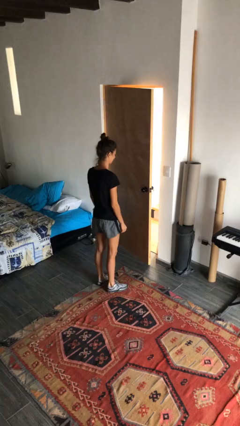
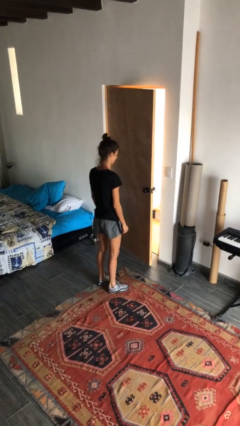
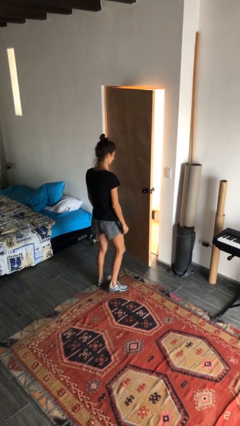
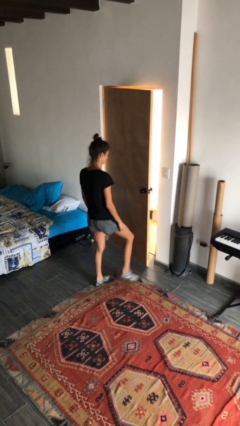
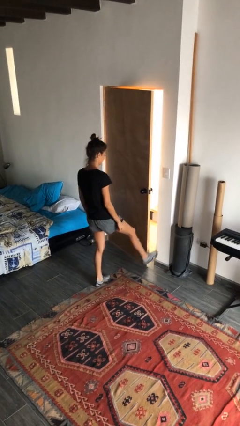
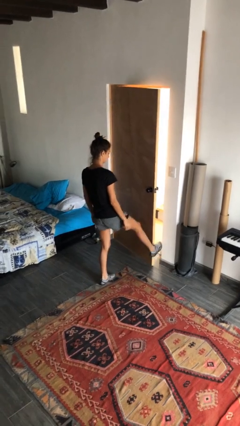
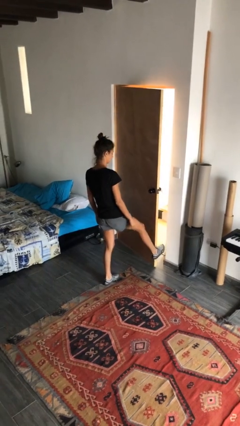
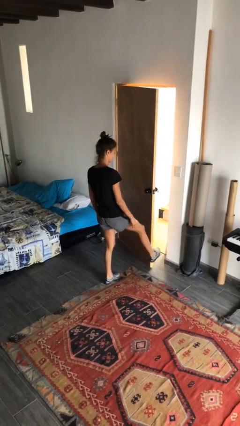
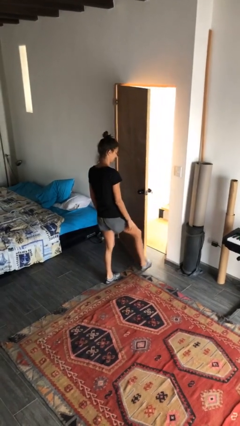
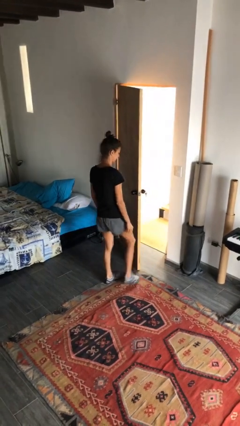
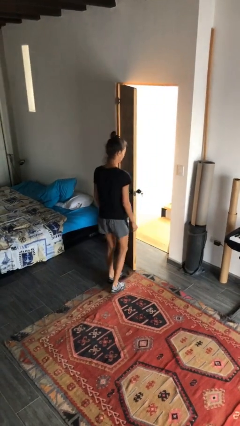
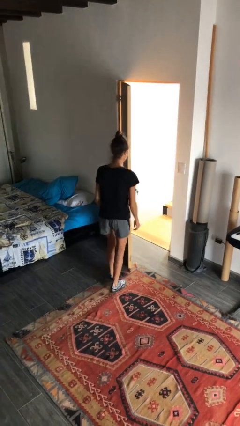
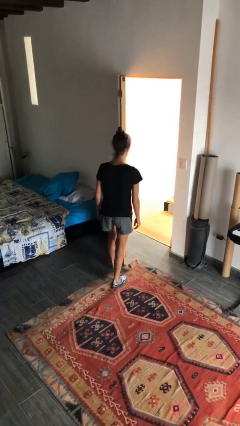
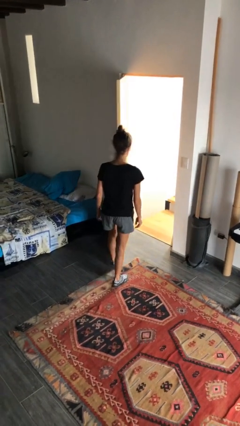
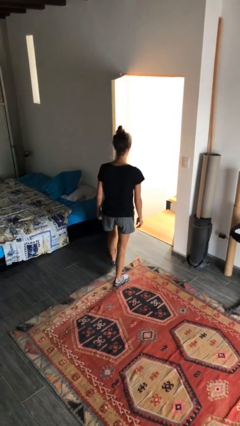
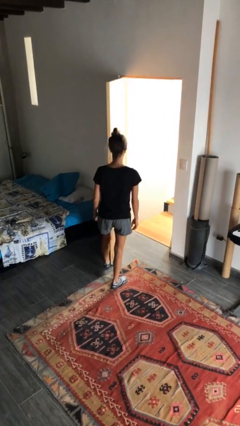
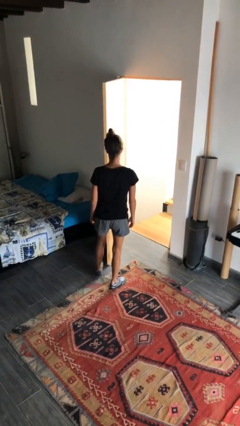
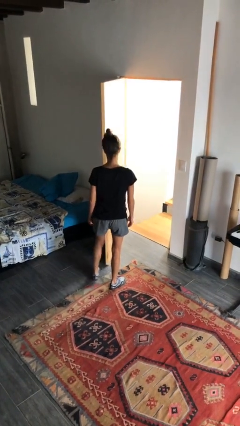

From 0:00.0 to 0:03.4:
person opens facility door

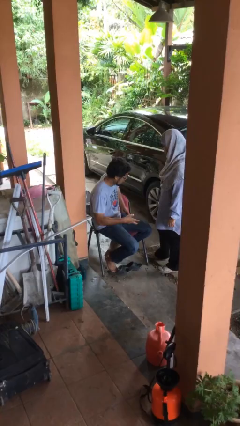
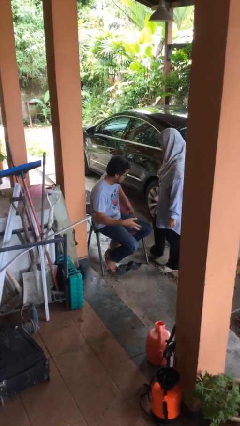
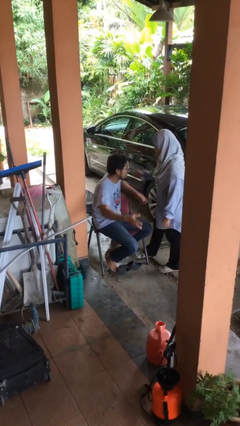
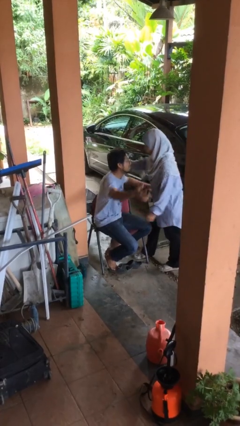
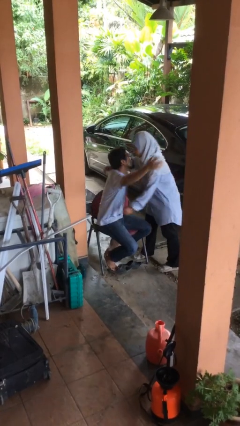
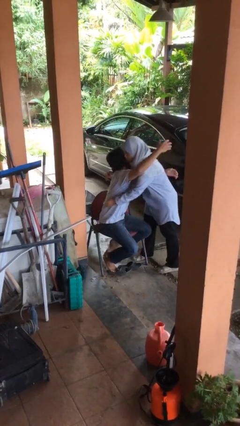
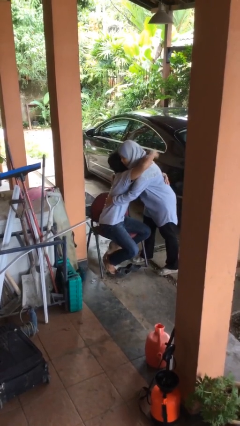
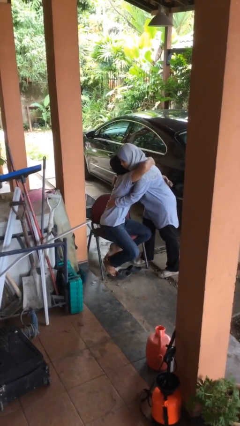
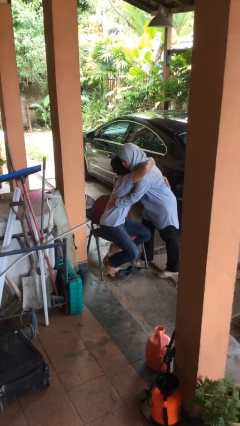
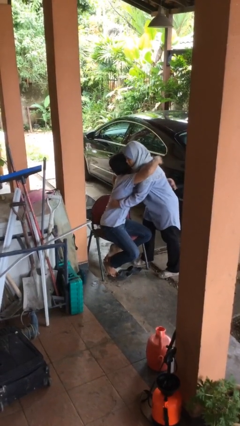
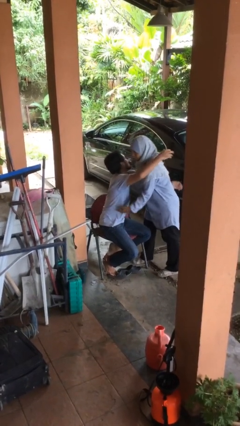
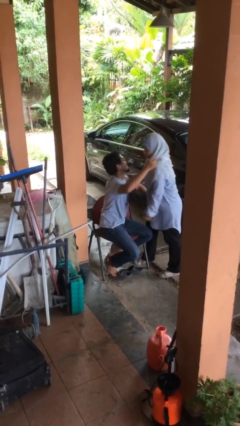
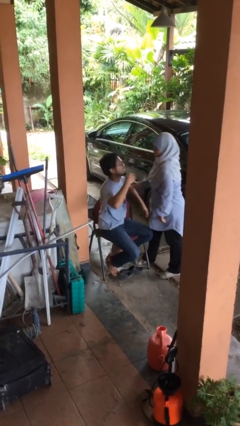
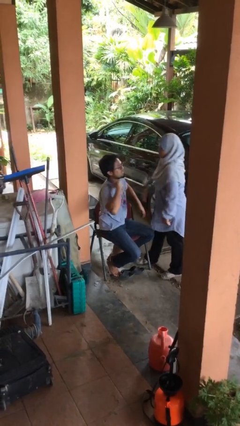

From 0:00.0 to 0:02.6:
person embraces person

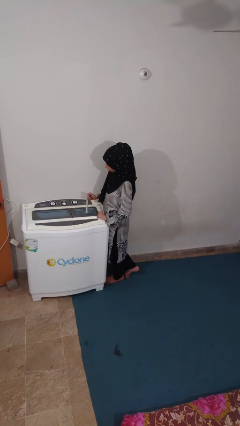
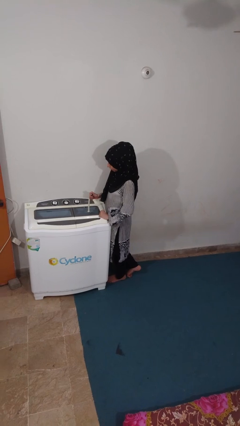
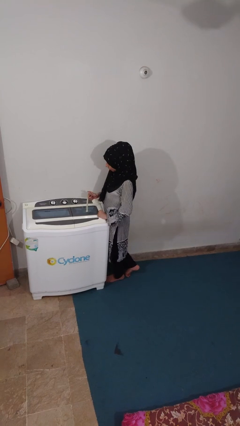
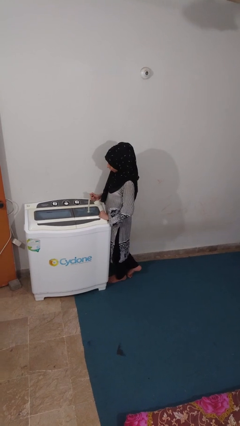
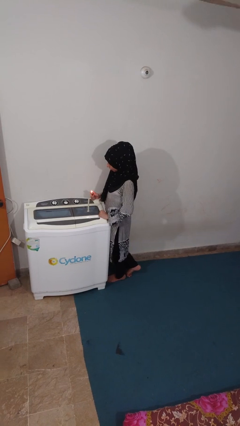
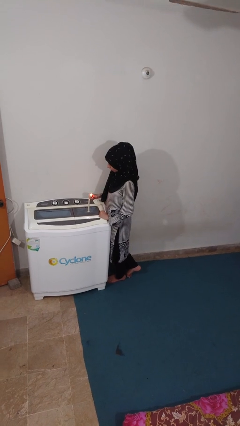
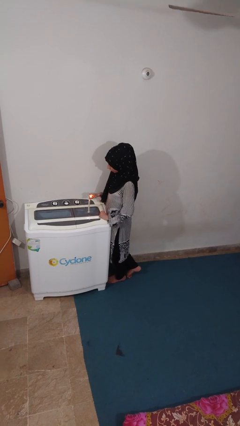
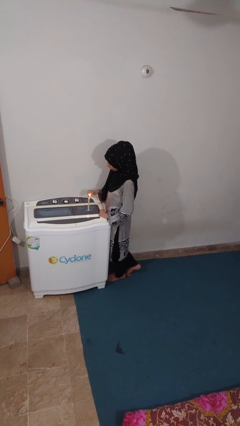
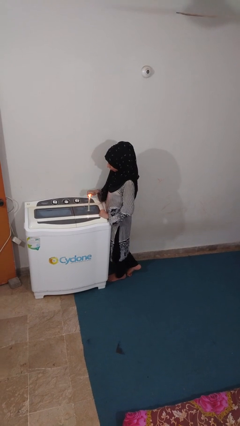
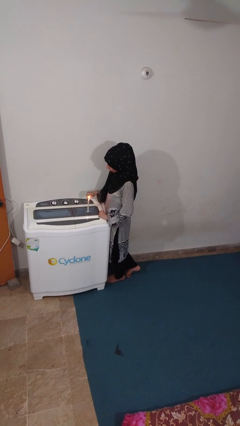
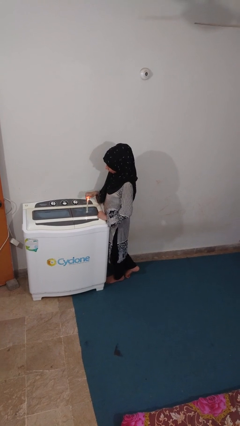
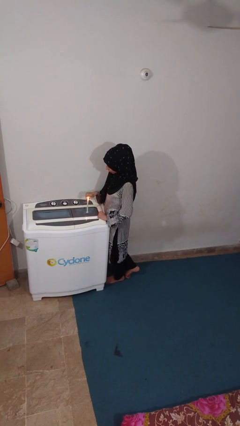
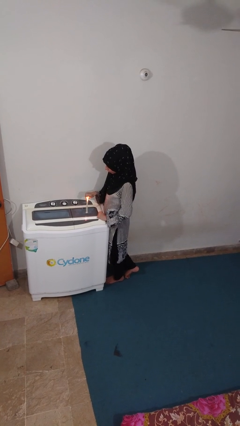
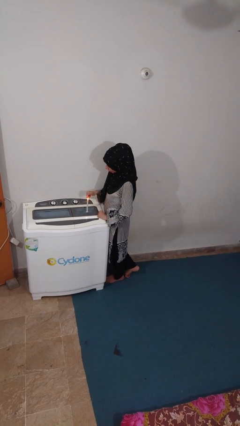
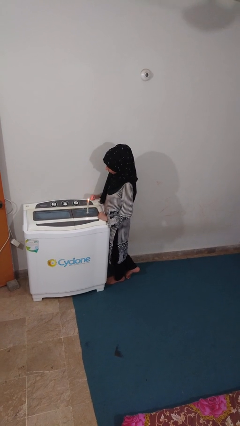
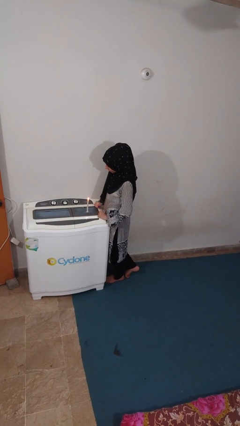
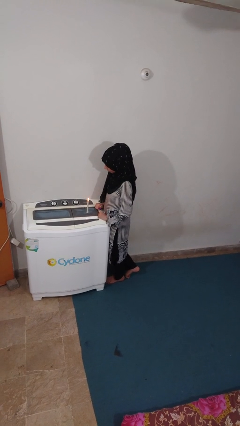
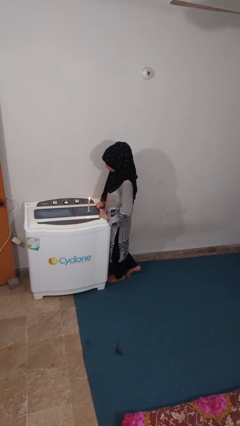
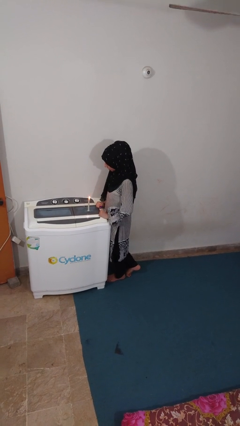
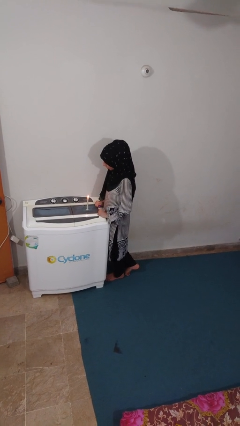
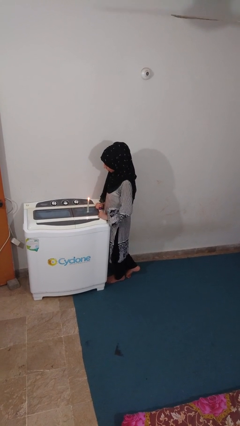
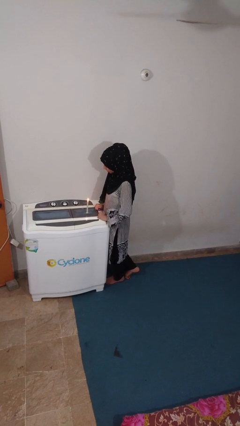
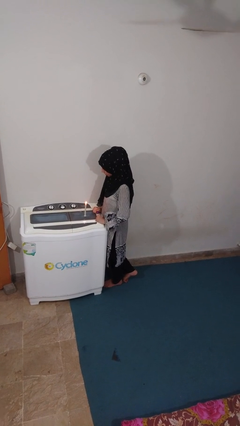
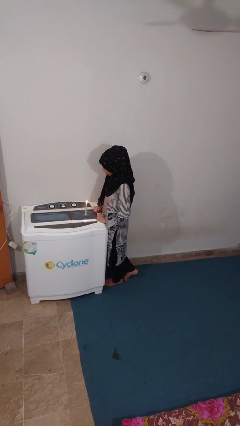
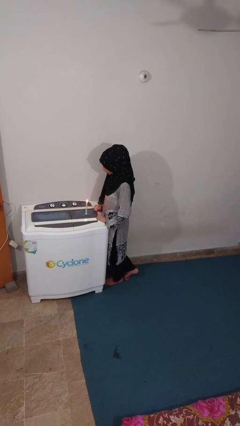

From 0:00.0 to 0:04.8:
person lights candle

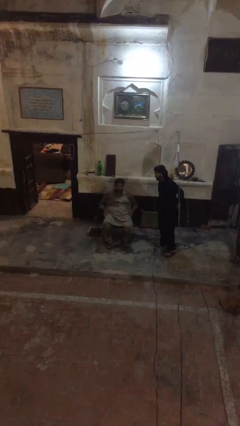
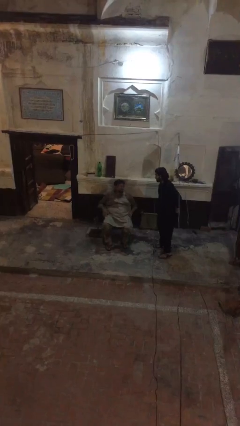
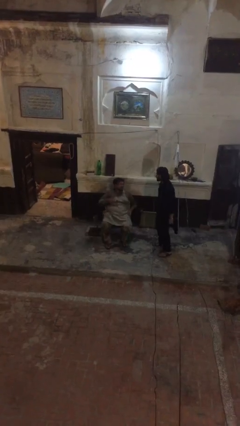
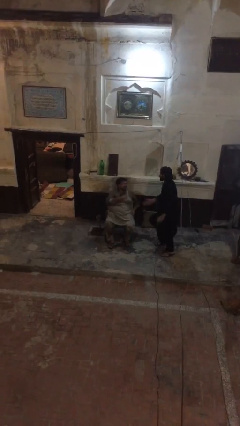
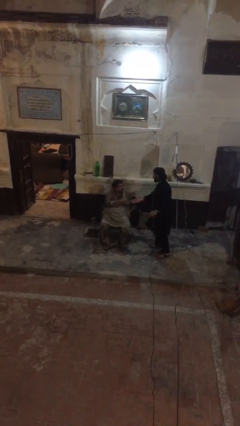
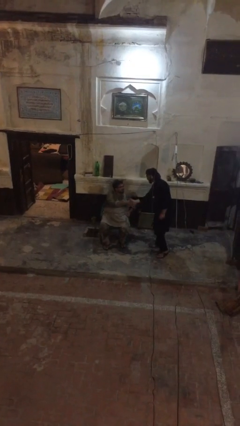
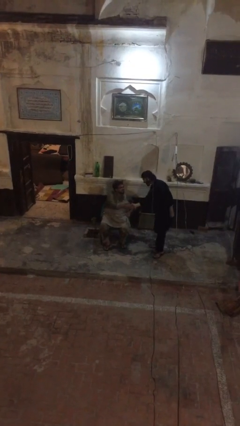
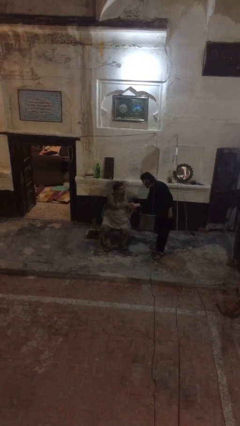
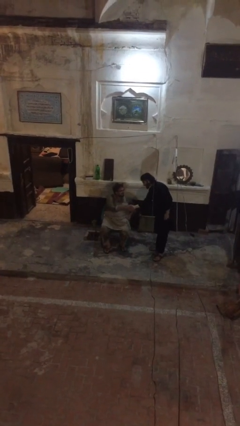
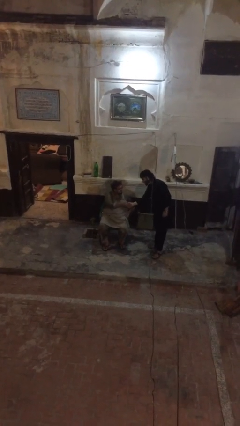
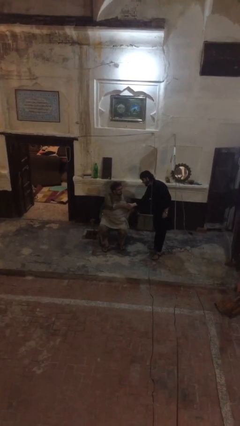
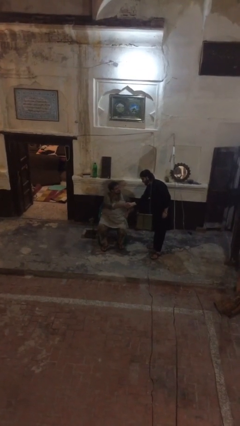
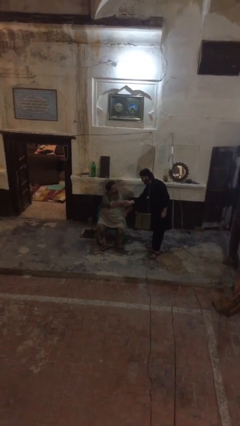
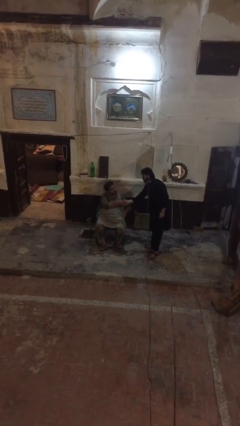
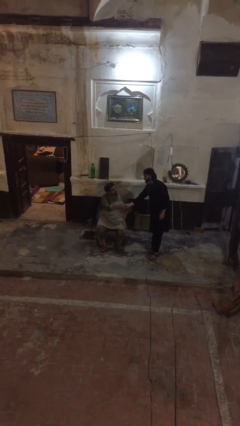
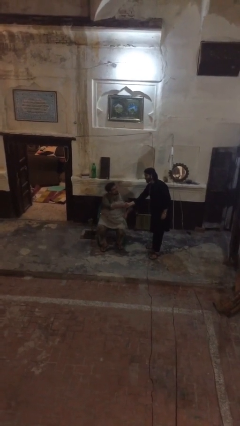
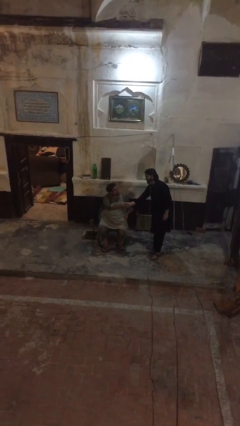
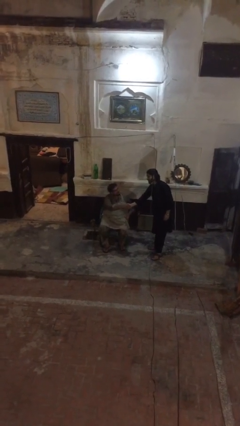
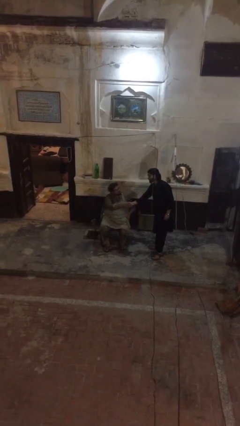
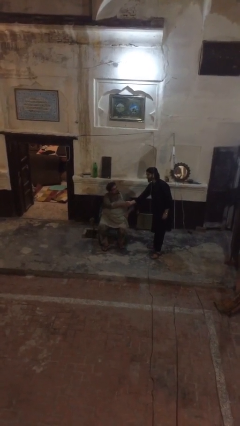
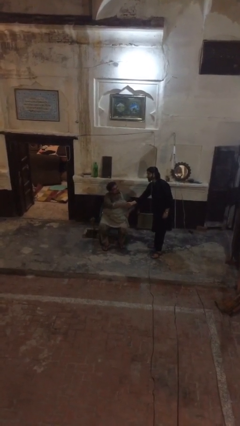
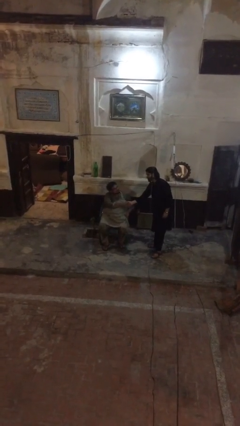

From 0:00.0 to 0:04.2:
person shakes hand

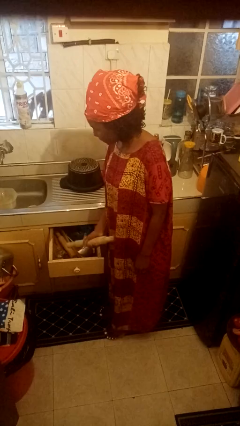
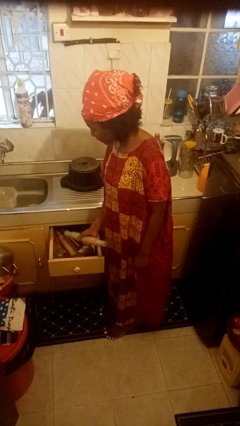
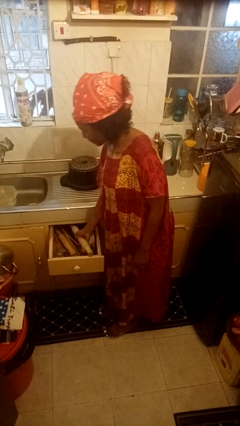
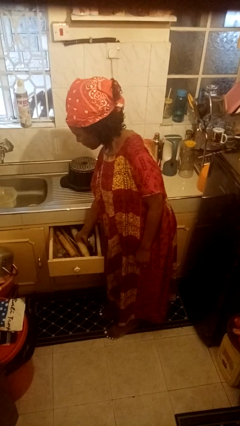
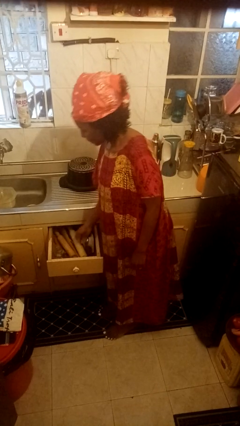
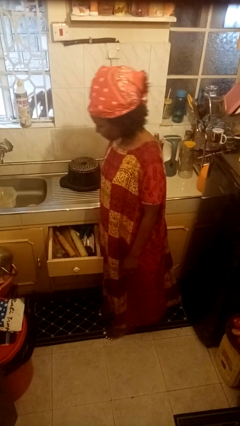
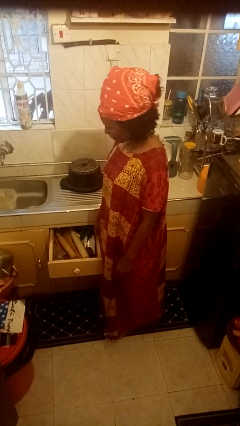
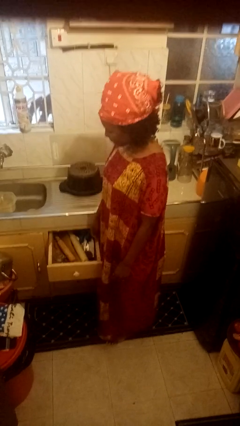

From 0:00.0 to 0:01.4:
person puts object into kitchen drawer

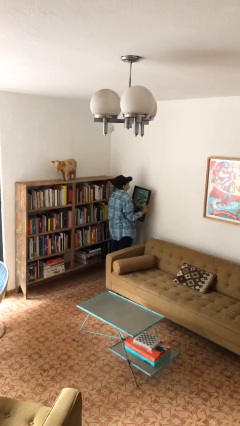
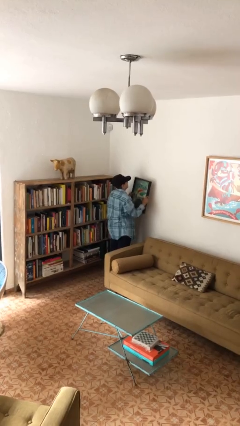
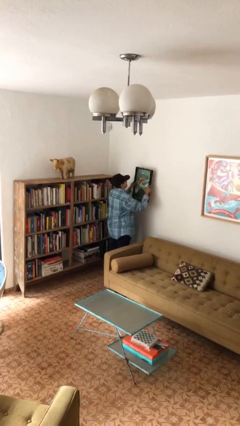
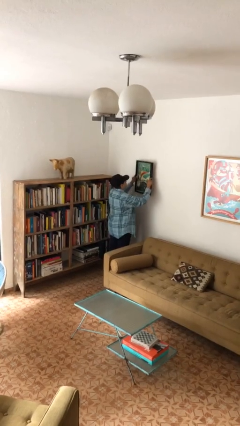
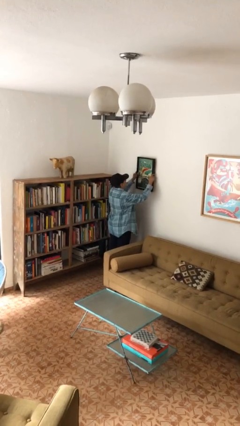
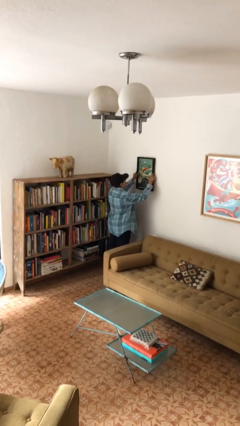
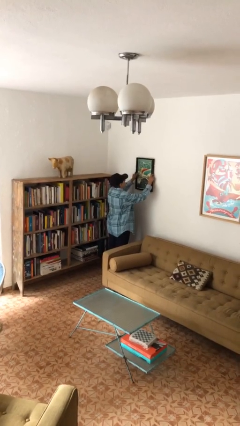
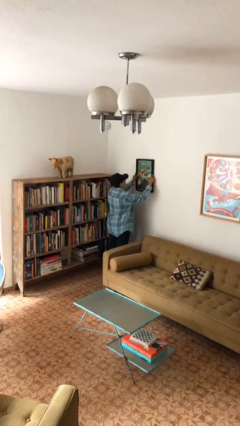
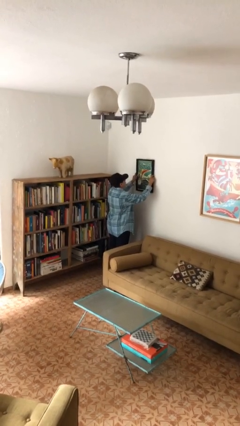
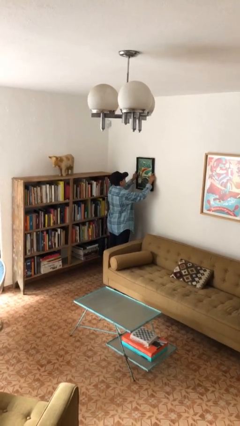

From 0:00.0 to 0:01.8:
person puts up picture frame
